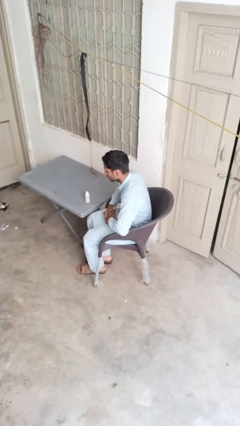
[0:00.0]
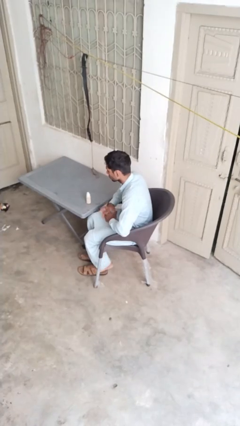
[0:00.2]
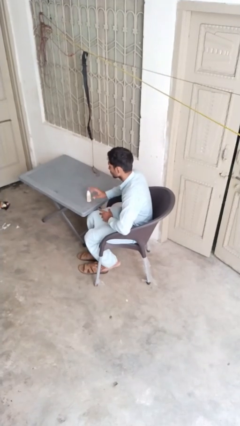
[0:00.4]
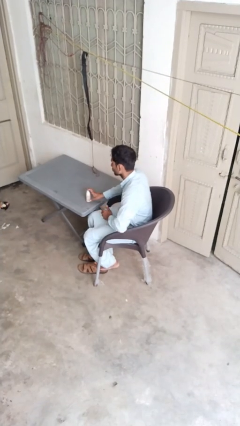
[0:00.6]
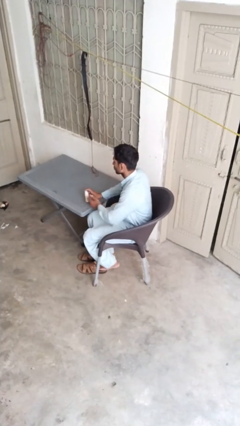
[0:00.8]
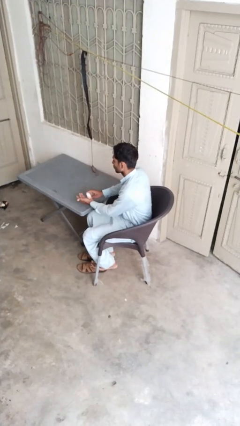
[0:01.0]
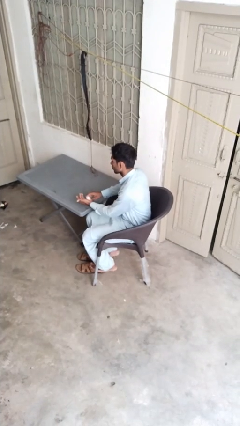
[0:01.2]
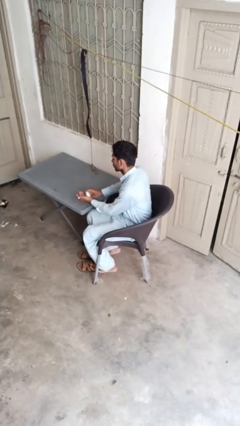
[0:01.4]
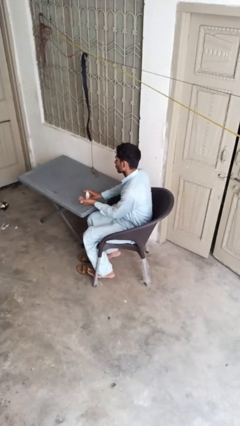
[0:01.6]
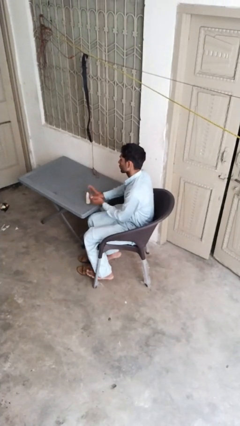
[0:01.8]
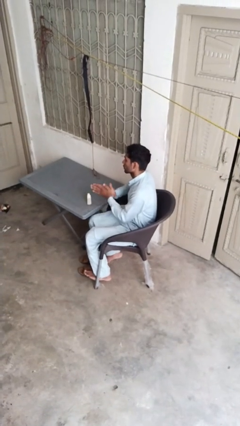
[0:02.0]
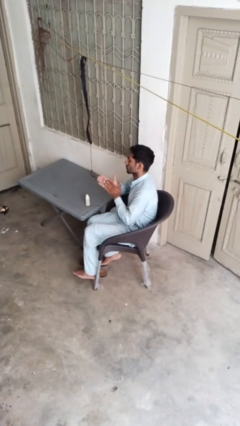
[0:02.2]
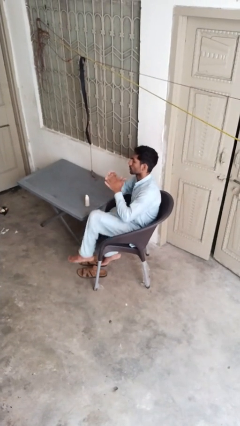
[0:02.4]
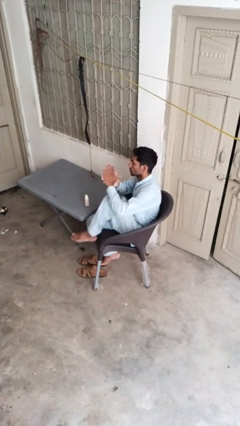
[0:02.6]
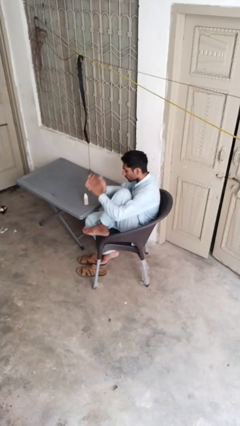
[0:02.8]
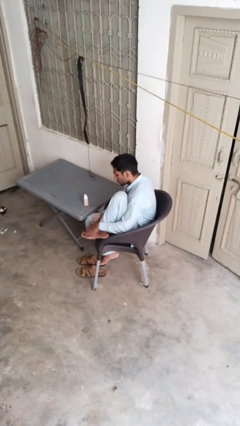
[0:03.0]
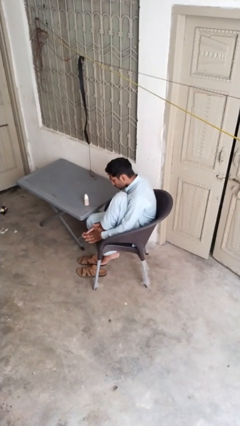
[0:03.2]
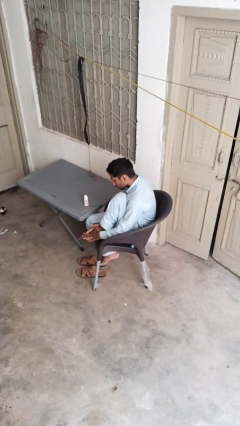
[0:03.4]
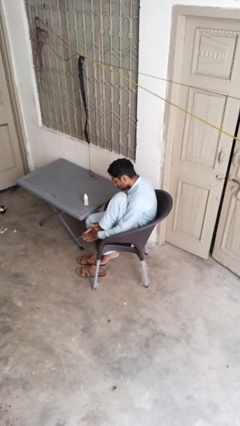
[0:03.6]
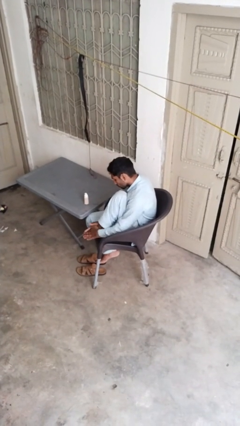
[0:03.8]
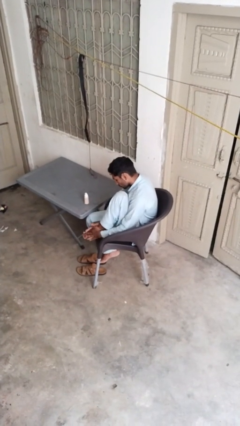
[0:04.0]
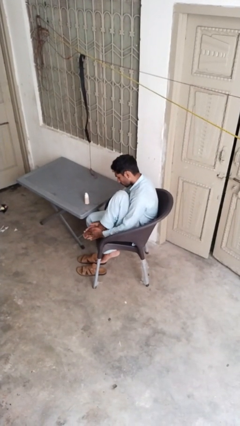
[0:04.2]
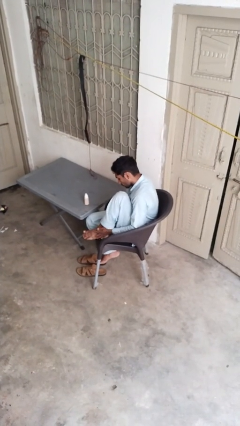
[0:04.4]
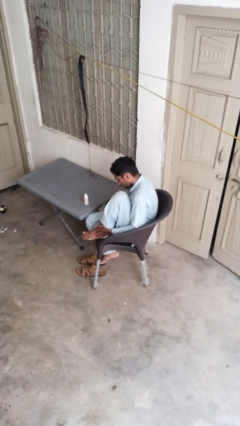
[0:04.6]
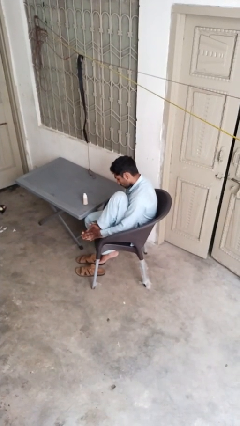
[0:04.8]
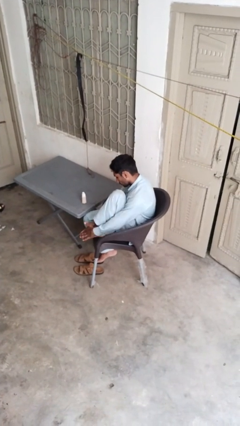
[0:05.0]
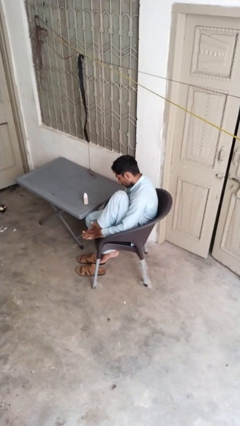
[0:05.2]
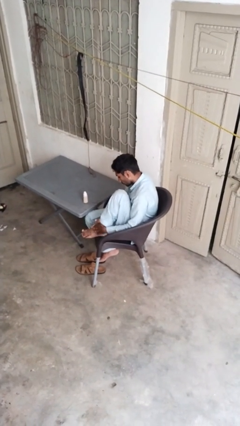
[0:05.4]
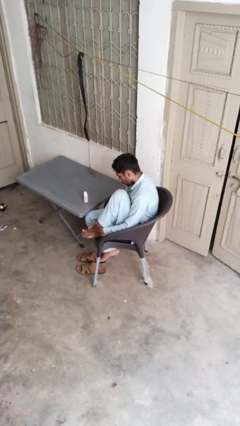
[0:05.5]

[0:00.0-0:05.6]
person applies facial moisturizer

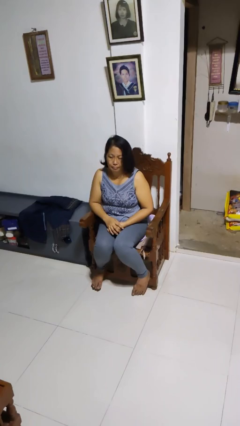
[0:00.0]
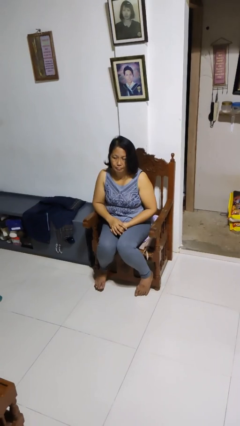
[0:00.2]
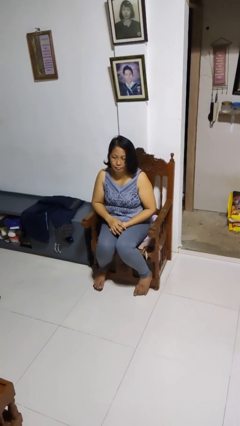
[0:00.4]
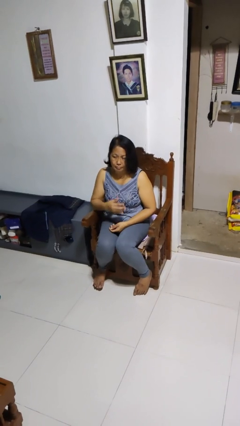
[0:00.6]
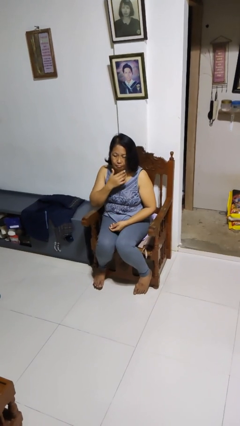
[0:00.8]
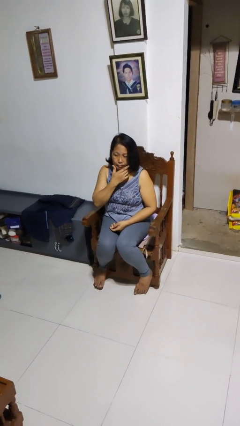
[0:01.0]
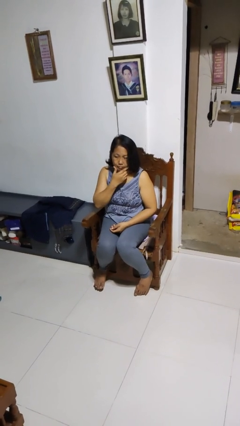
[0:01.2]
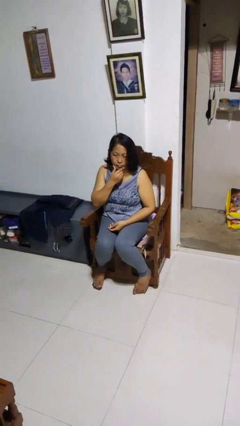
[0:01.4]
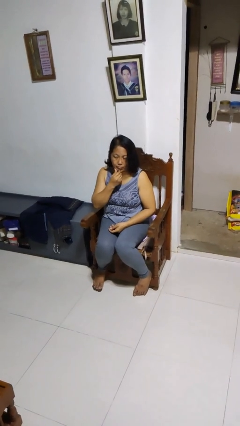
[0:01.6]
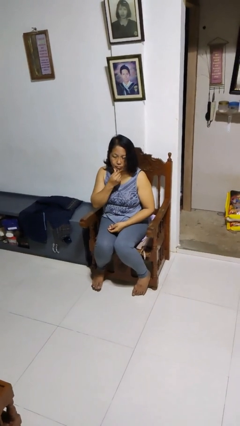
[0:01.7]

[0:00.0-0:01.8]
person strokes chin

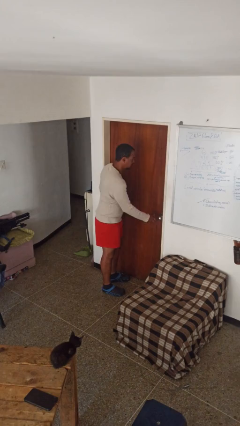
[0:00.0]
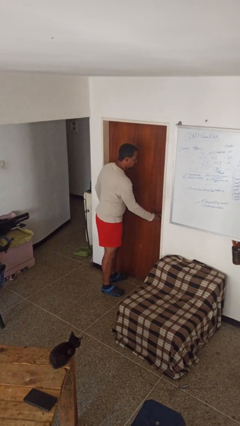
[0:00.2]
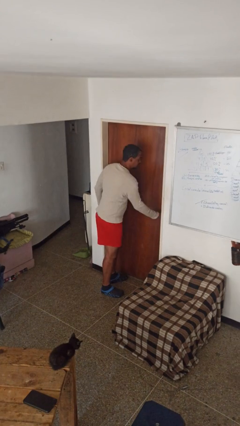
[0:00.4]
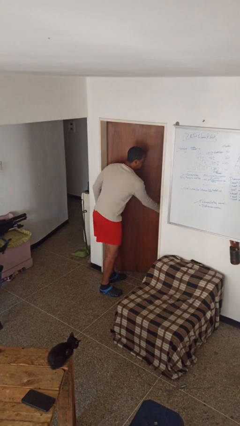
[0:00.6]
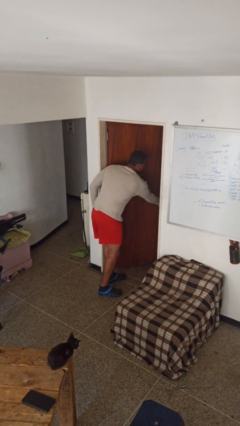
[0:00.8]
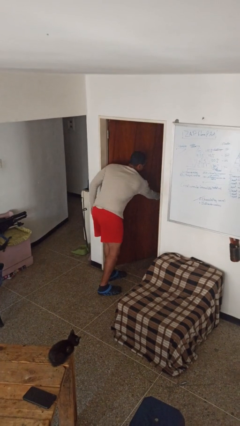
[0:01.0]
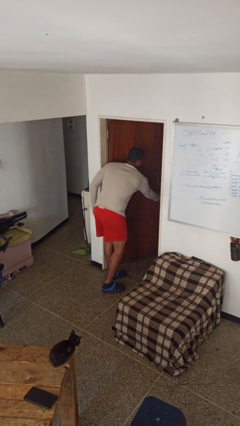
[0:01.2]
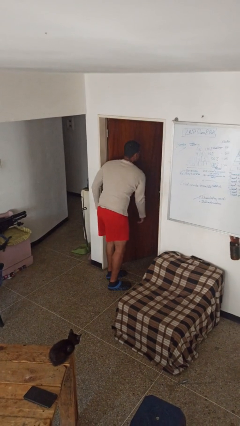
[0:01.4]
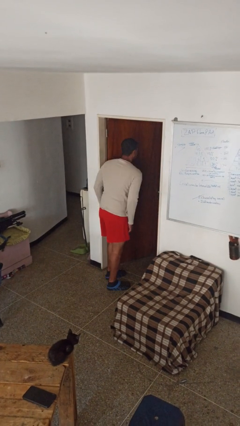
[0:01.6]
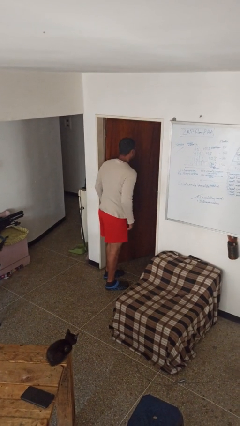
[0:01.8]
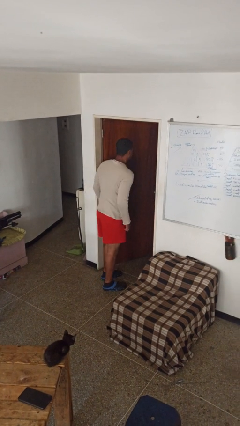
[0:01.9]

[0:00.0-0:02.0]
person opens facility door

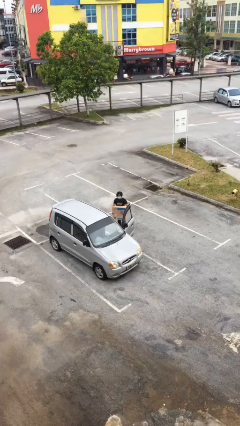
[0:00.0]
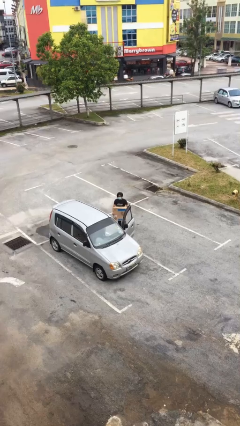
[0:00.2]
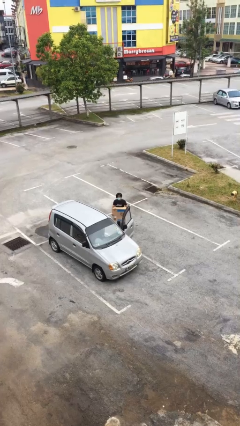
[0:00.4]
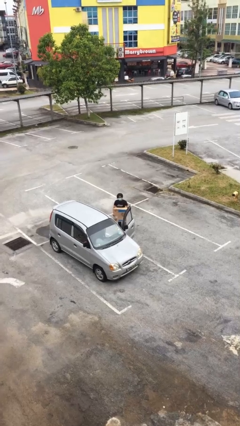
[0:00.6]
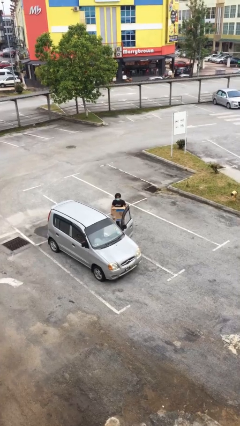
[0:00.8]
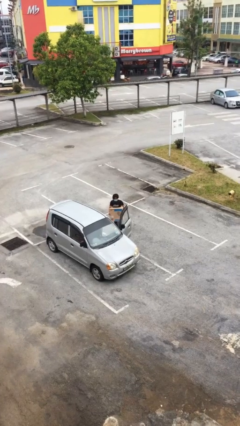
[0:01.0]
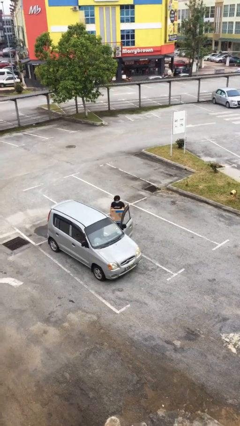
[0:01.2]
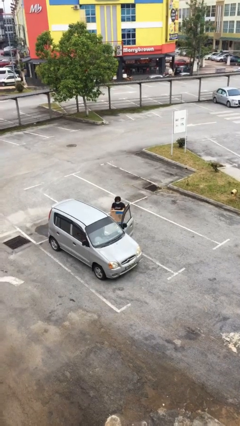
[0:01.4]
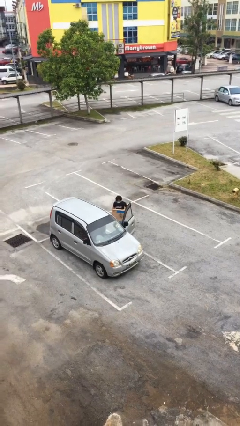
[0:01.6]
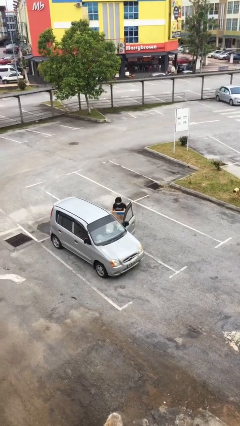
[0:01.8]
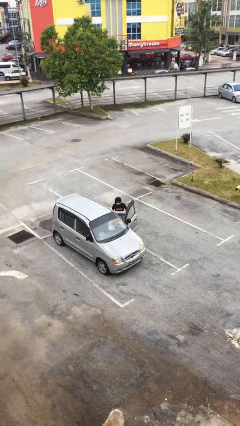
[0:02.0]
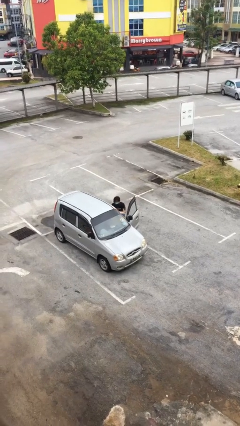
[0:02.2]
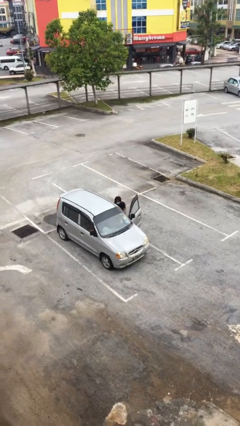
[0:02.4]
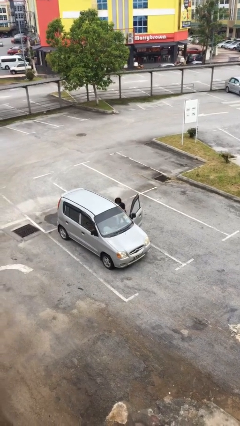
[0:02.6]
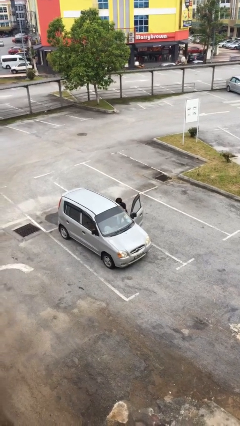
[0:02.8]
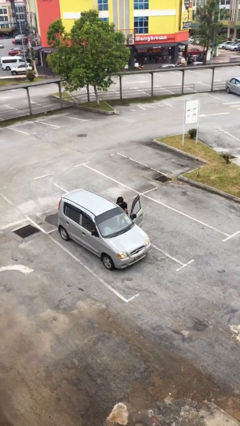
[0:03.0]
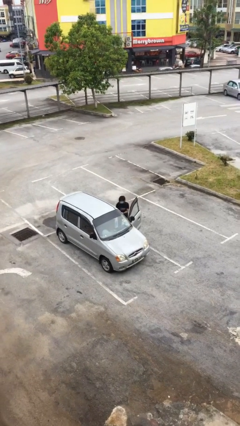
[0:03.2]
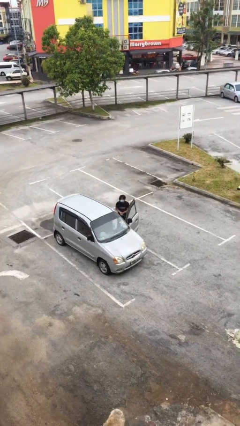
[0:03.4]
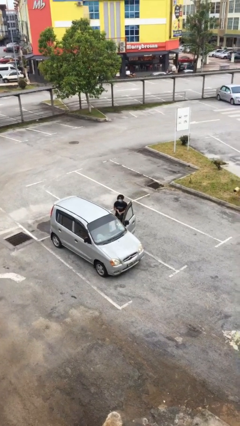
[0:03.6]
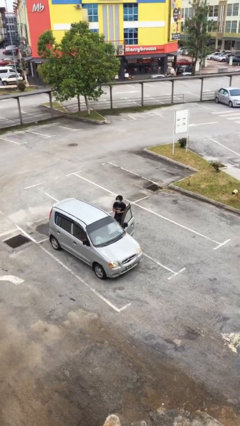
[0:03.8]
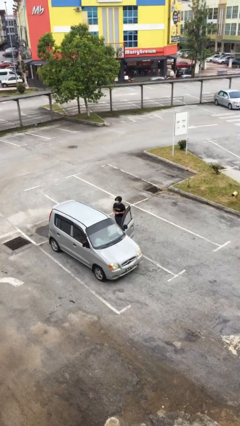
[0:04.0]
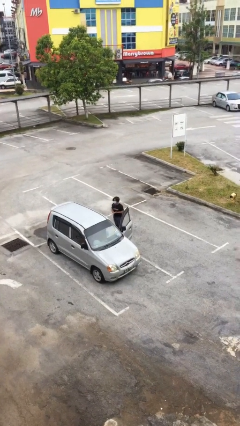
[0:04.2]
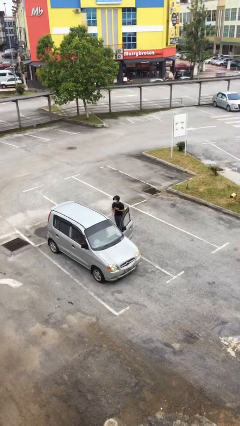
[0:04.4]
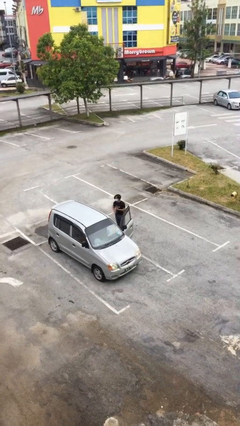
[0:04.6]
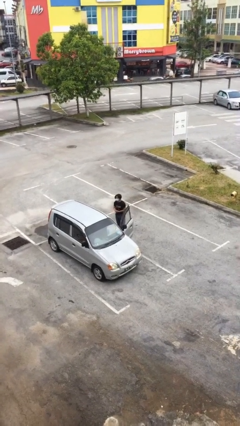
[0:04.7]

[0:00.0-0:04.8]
person loads car

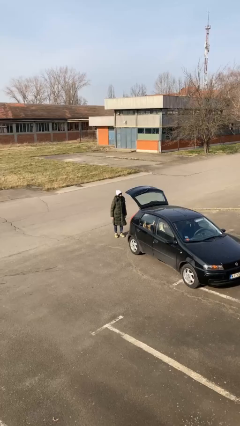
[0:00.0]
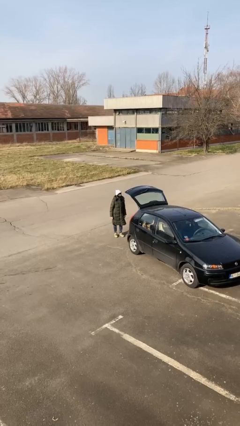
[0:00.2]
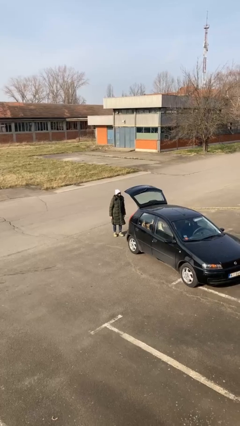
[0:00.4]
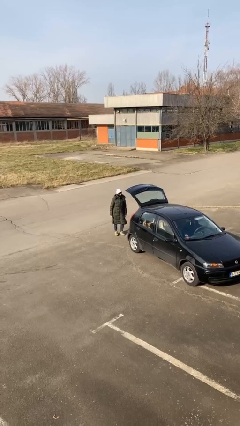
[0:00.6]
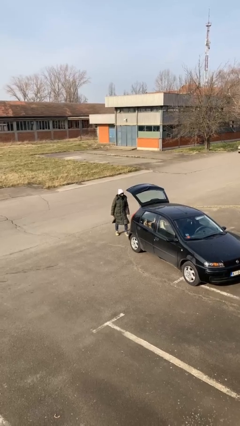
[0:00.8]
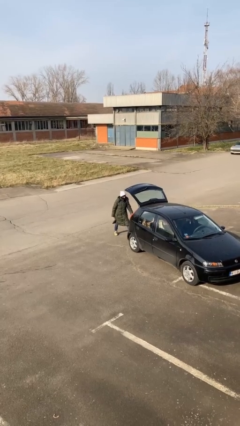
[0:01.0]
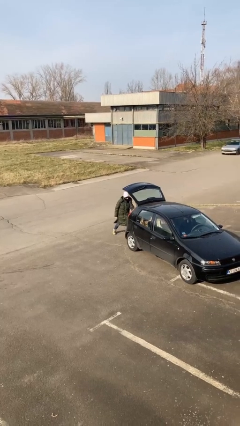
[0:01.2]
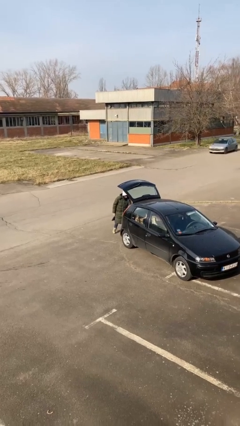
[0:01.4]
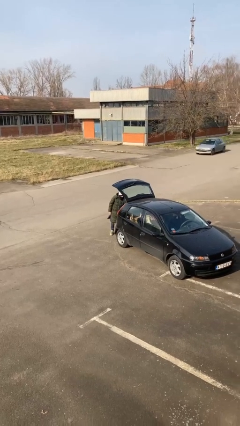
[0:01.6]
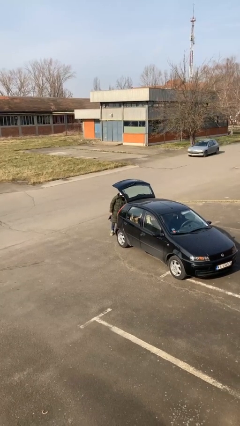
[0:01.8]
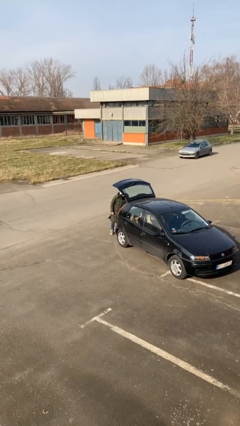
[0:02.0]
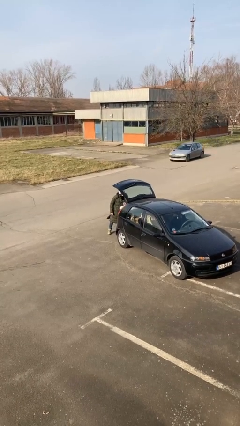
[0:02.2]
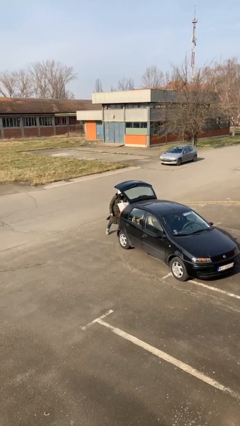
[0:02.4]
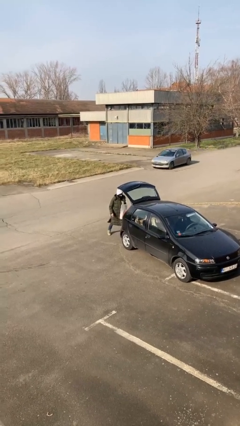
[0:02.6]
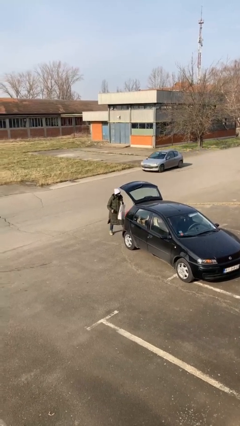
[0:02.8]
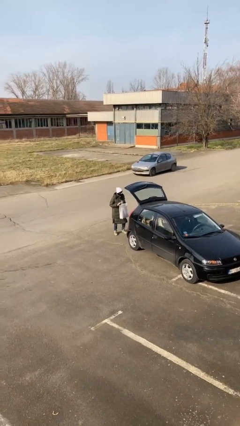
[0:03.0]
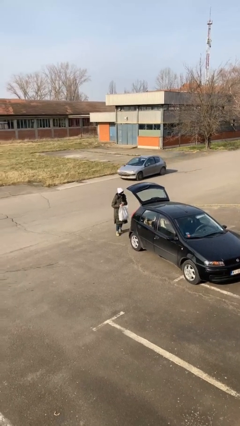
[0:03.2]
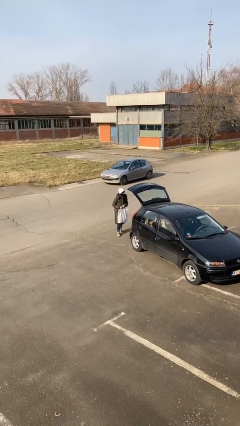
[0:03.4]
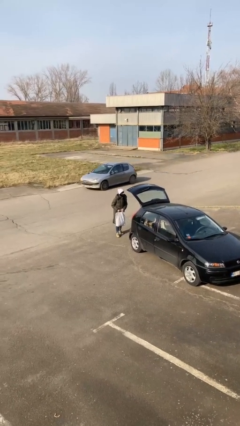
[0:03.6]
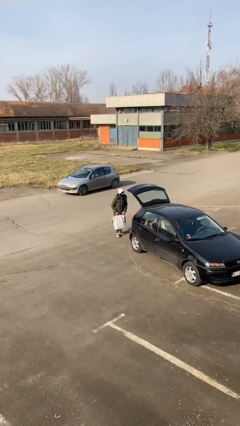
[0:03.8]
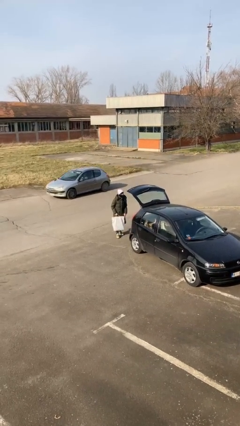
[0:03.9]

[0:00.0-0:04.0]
person unloads car
